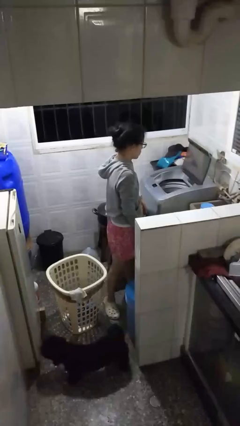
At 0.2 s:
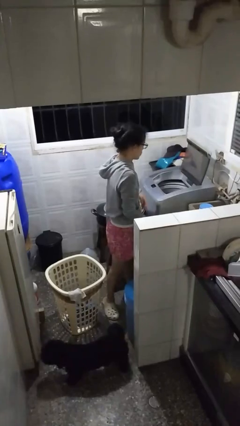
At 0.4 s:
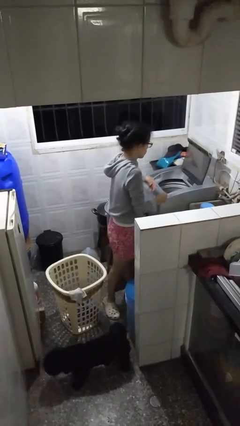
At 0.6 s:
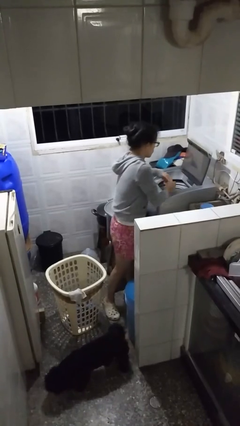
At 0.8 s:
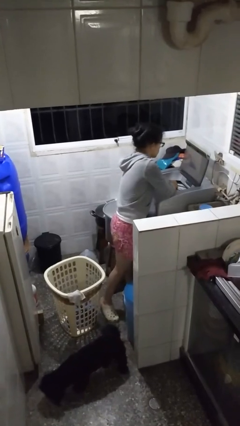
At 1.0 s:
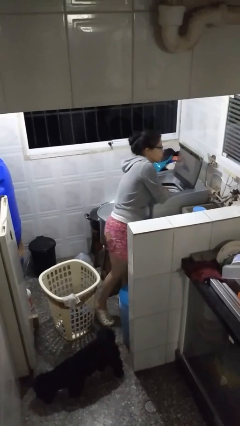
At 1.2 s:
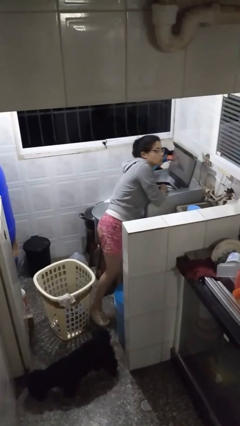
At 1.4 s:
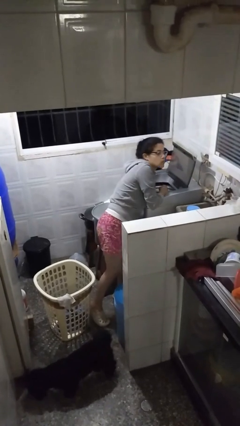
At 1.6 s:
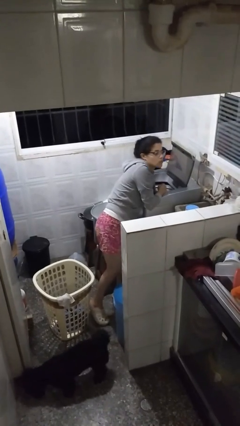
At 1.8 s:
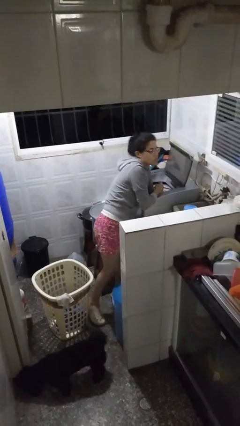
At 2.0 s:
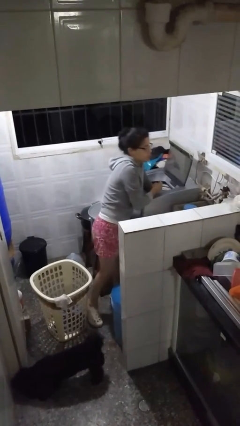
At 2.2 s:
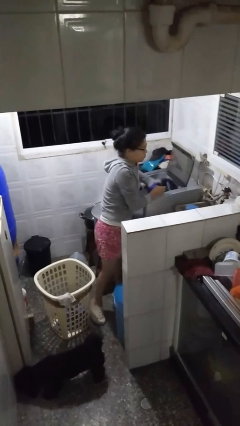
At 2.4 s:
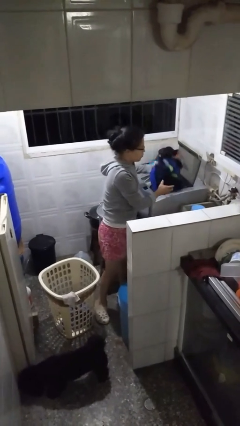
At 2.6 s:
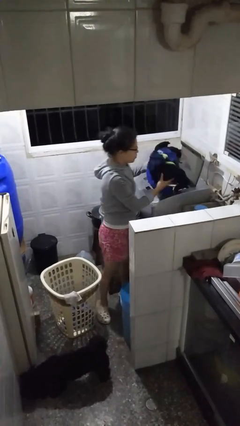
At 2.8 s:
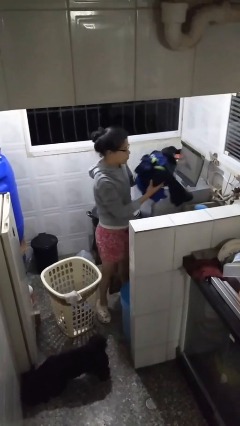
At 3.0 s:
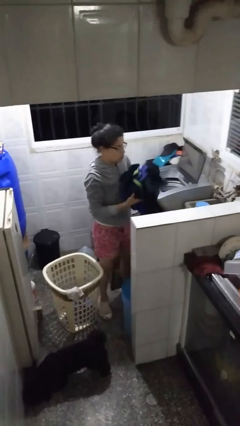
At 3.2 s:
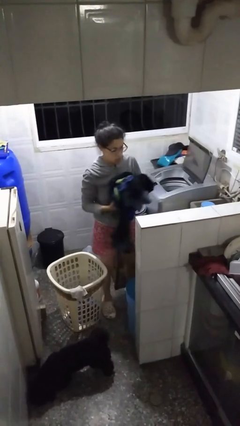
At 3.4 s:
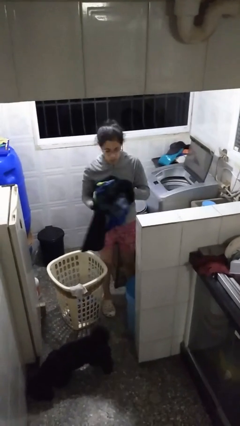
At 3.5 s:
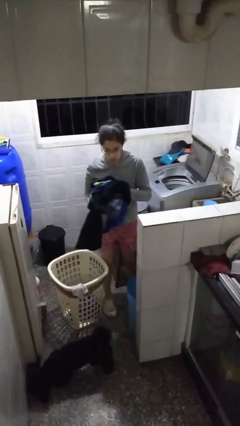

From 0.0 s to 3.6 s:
person loads clotheswasher

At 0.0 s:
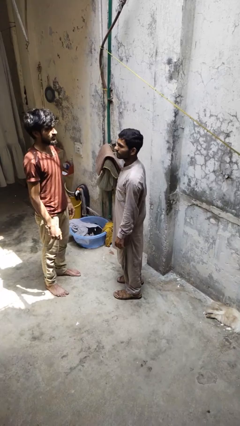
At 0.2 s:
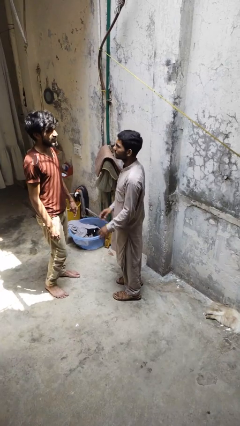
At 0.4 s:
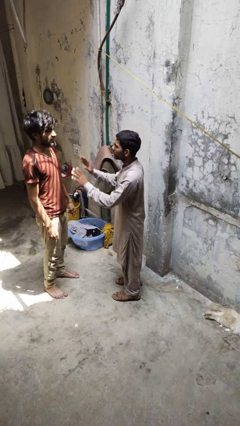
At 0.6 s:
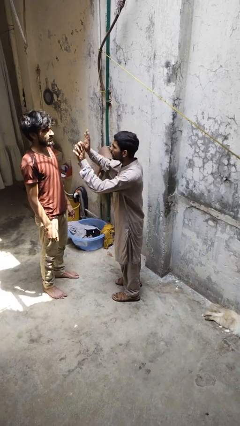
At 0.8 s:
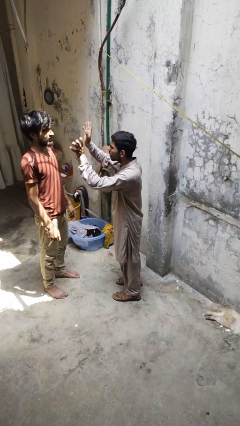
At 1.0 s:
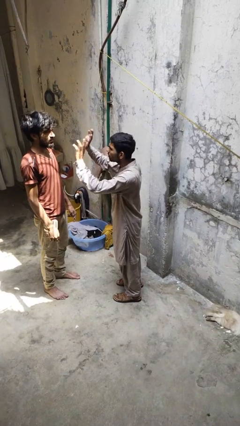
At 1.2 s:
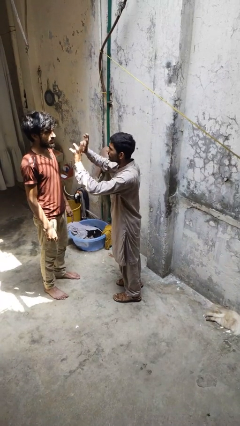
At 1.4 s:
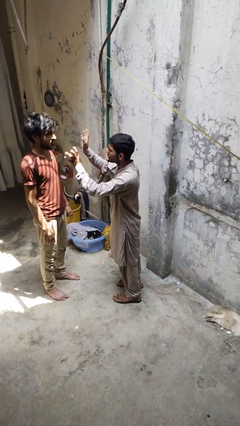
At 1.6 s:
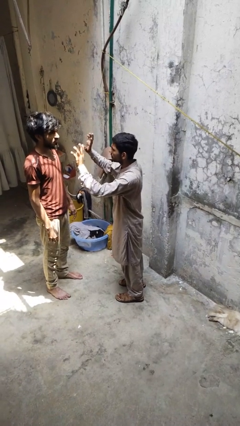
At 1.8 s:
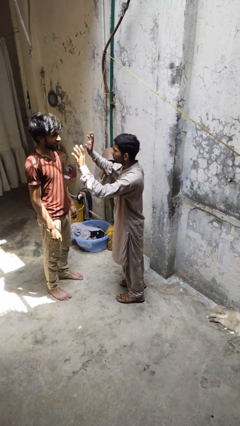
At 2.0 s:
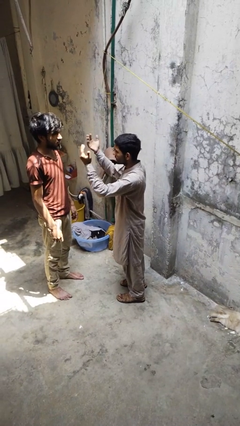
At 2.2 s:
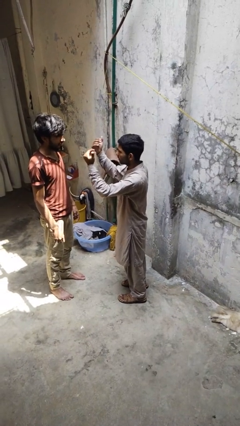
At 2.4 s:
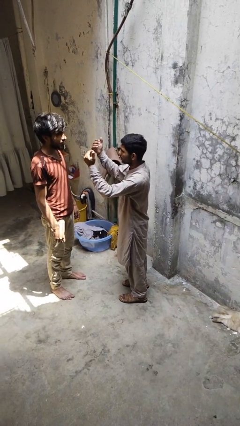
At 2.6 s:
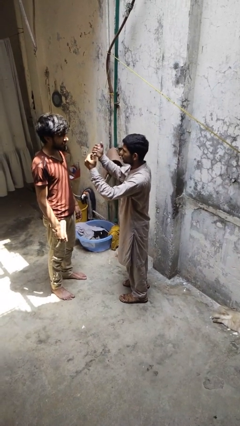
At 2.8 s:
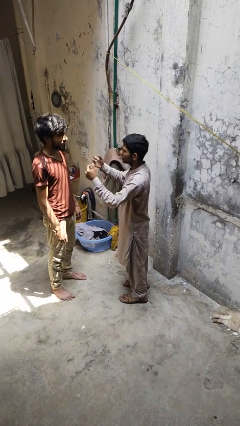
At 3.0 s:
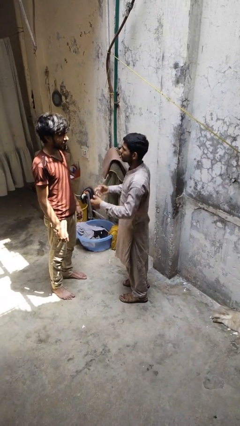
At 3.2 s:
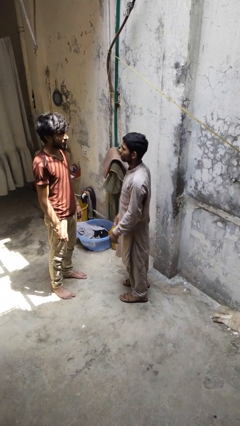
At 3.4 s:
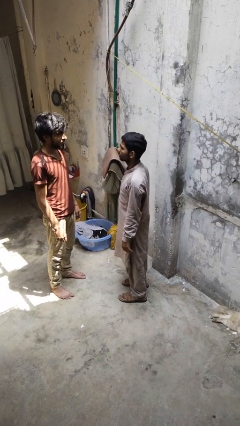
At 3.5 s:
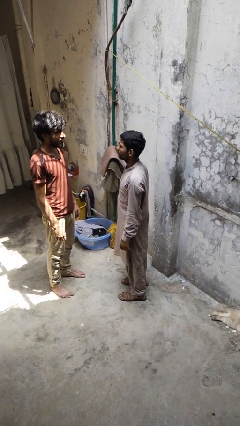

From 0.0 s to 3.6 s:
person waves at person

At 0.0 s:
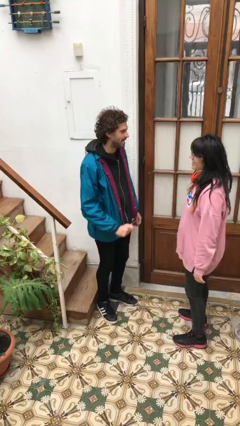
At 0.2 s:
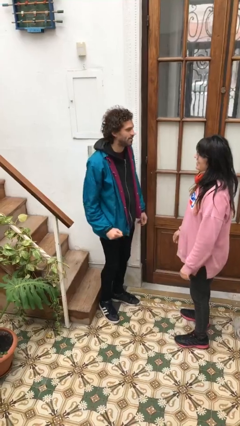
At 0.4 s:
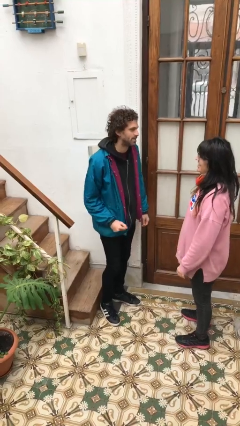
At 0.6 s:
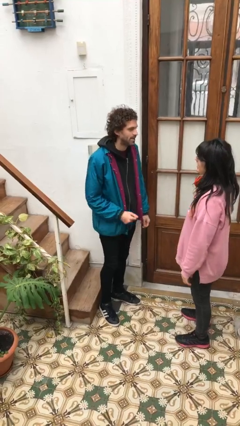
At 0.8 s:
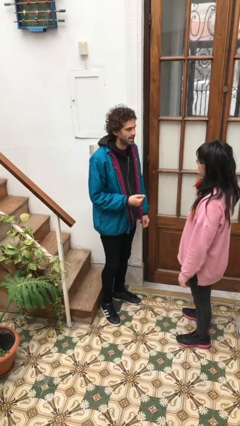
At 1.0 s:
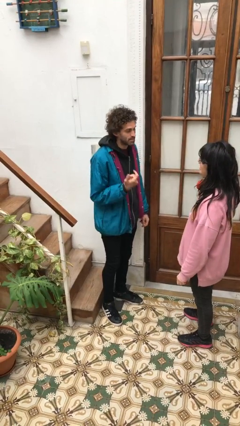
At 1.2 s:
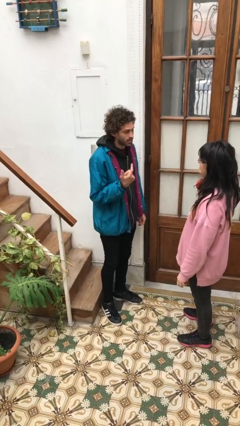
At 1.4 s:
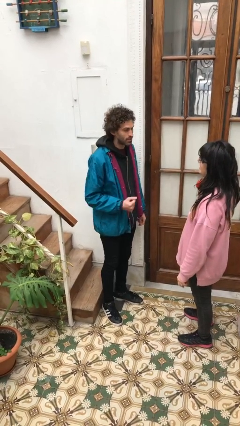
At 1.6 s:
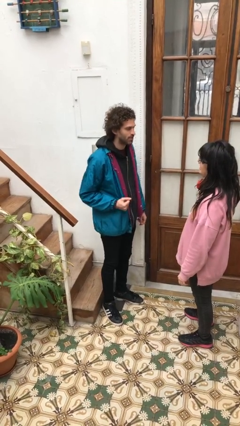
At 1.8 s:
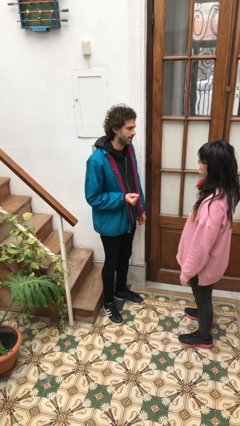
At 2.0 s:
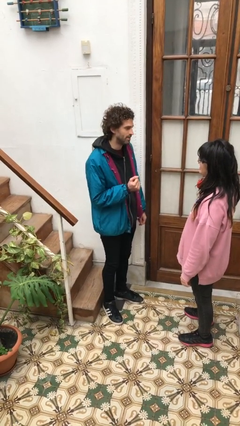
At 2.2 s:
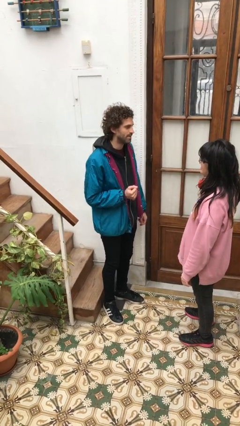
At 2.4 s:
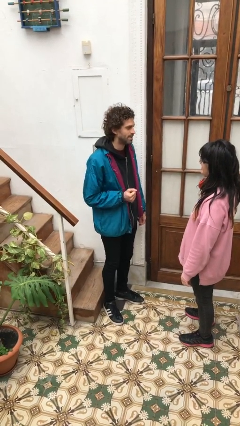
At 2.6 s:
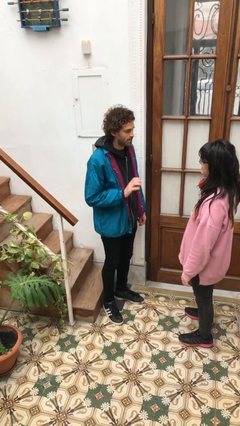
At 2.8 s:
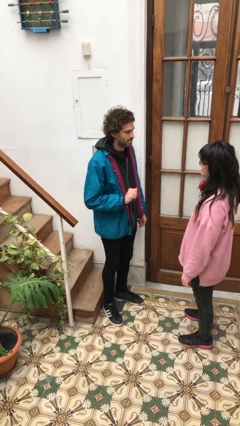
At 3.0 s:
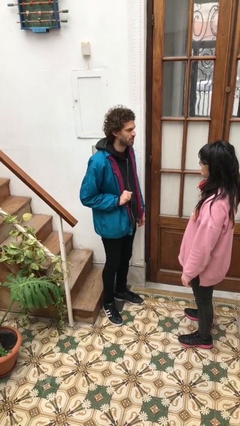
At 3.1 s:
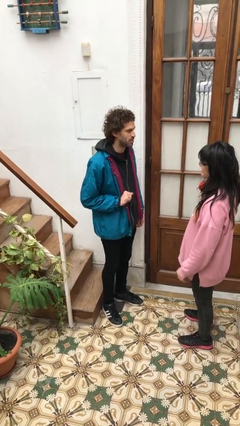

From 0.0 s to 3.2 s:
person talks to person

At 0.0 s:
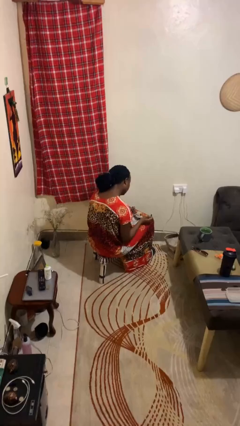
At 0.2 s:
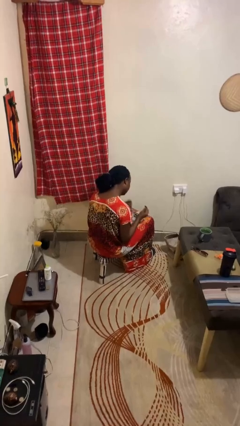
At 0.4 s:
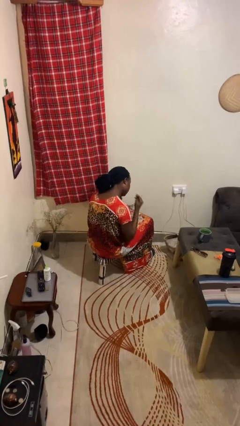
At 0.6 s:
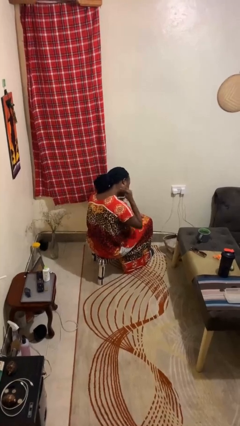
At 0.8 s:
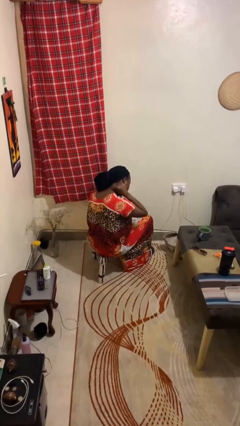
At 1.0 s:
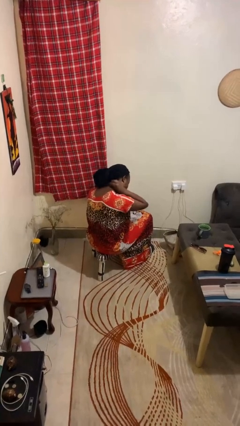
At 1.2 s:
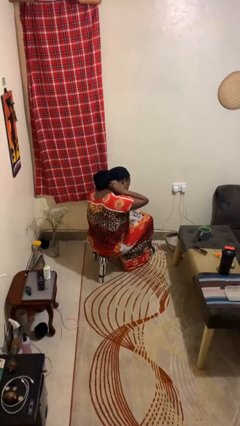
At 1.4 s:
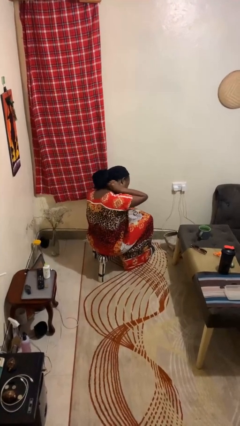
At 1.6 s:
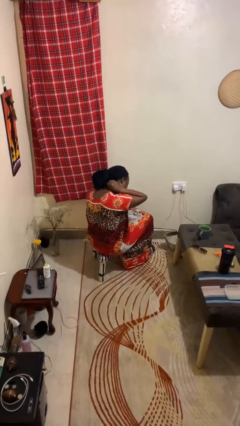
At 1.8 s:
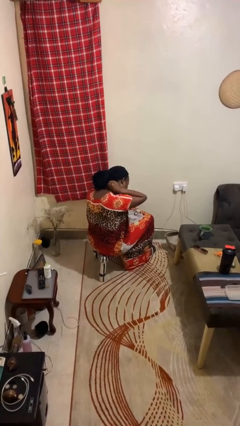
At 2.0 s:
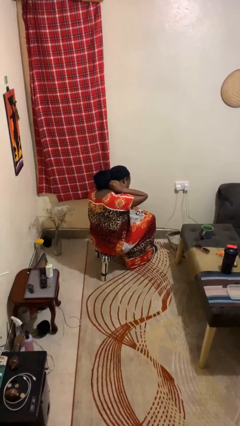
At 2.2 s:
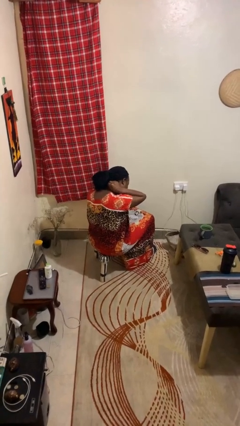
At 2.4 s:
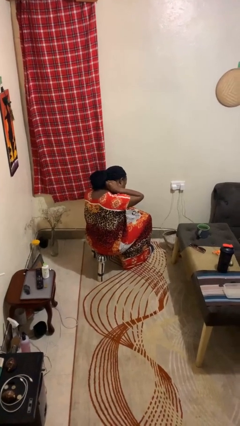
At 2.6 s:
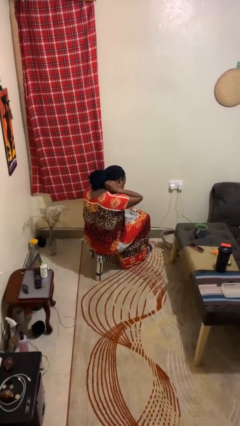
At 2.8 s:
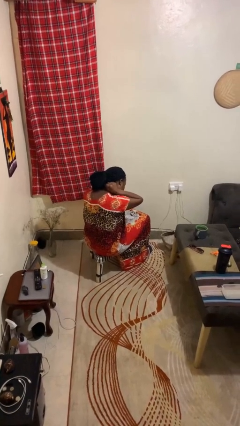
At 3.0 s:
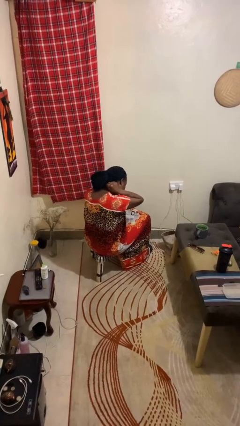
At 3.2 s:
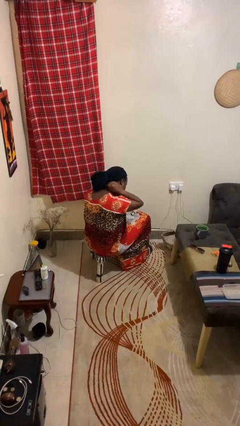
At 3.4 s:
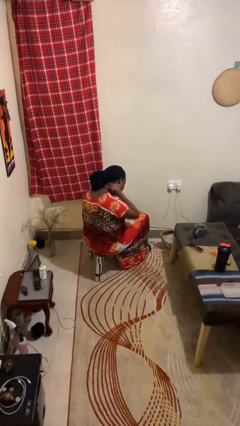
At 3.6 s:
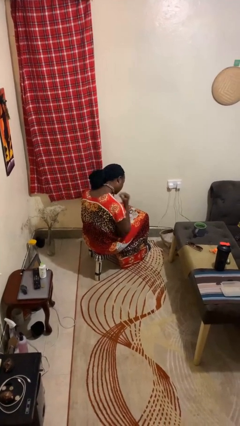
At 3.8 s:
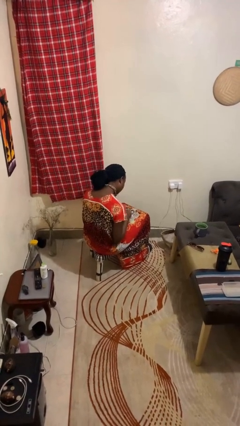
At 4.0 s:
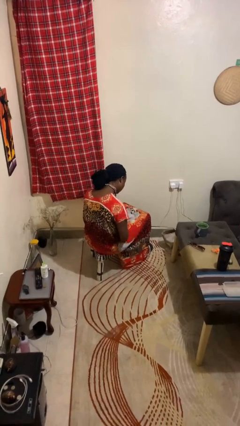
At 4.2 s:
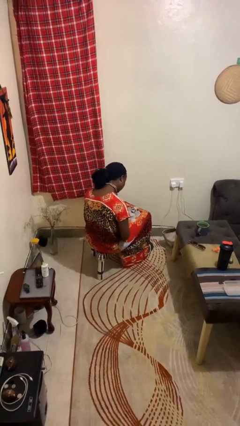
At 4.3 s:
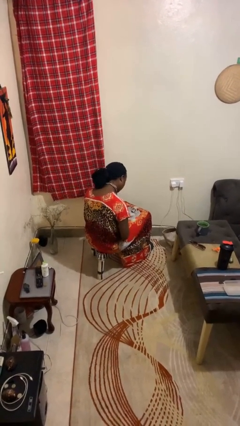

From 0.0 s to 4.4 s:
person puts on necklace

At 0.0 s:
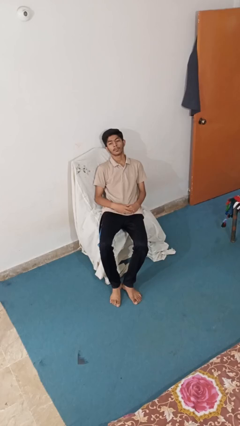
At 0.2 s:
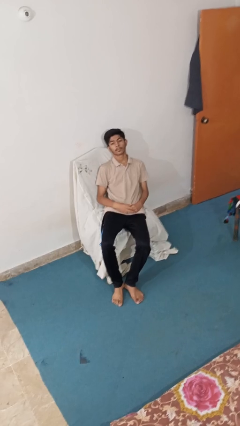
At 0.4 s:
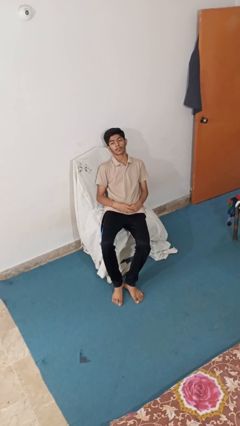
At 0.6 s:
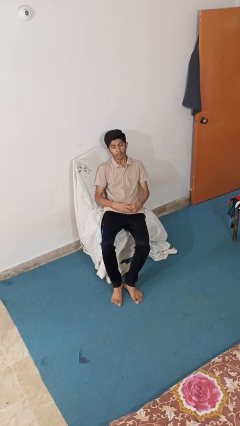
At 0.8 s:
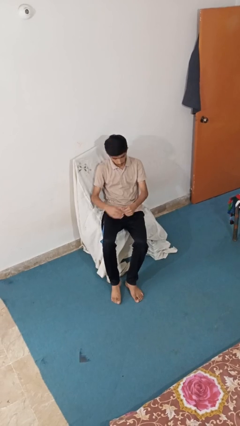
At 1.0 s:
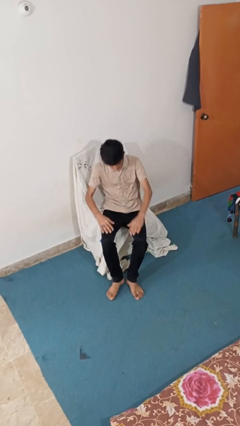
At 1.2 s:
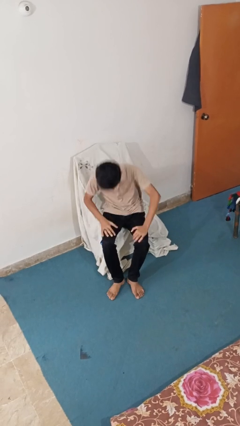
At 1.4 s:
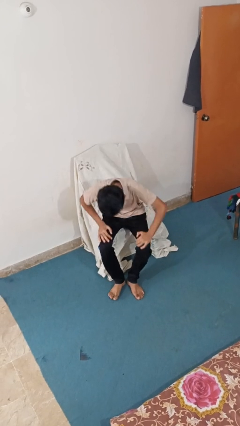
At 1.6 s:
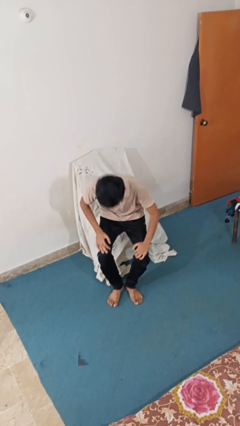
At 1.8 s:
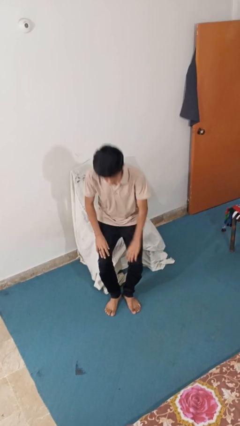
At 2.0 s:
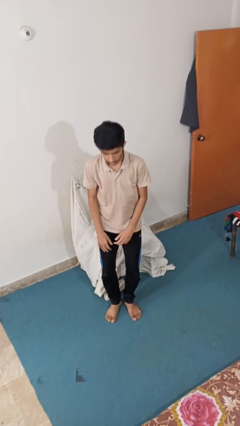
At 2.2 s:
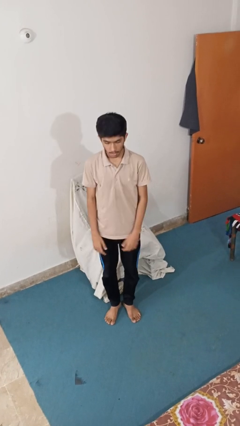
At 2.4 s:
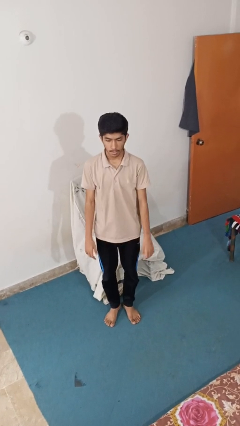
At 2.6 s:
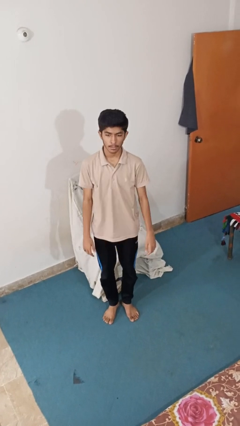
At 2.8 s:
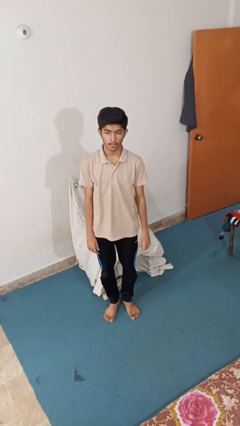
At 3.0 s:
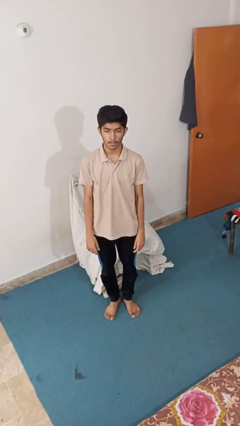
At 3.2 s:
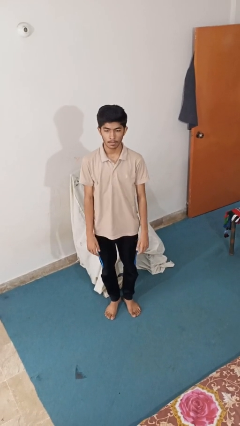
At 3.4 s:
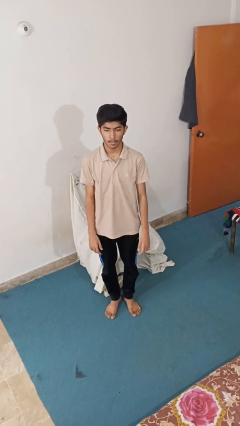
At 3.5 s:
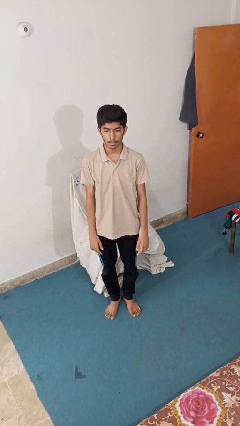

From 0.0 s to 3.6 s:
person stands up
